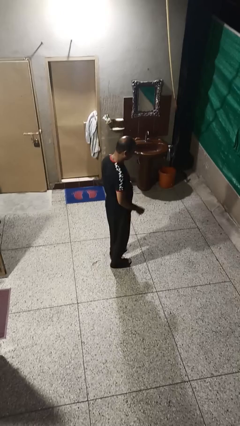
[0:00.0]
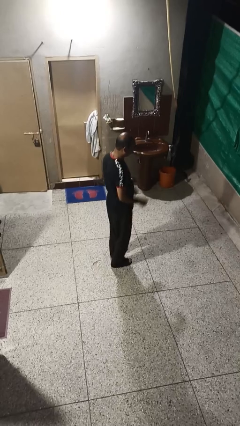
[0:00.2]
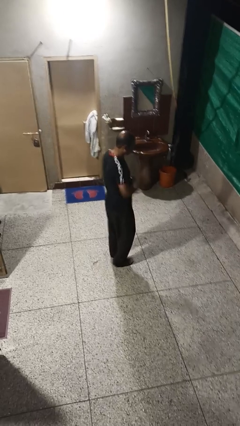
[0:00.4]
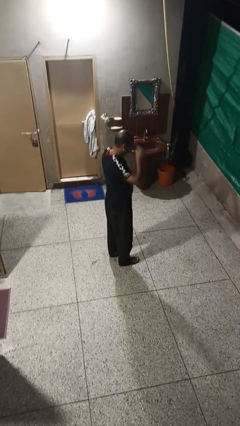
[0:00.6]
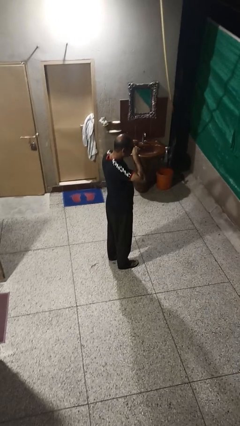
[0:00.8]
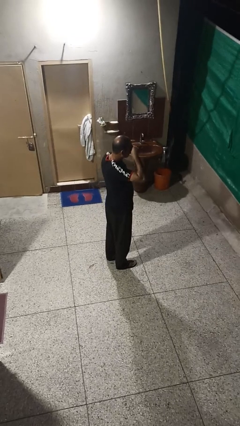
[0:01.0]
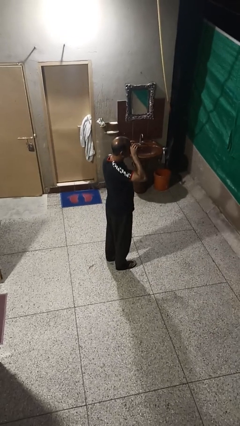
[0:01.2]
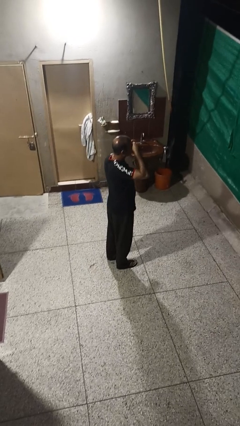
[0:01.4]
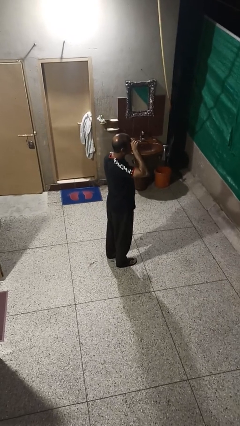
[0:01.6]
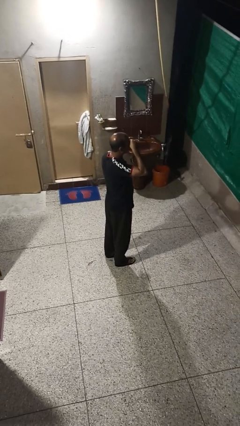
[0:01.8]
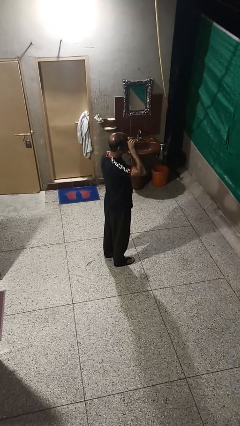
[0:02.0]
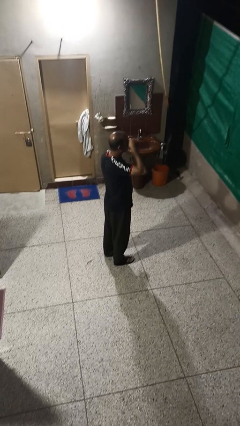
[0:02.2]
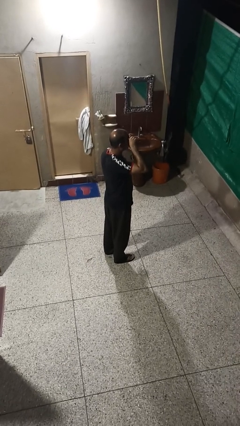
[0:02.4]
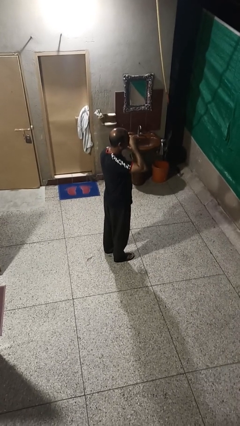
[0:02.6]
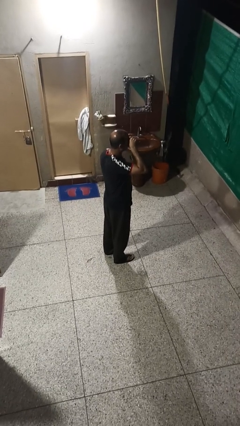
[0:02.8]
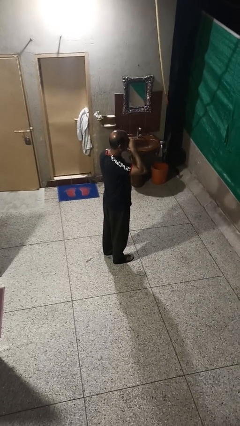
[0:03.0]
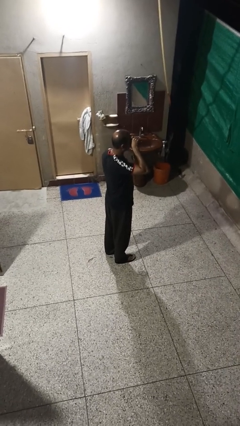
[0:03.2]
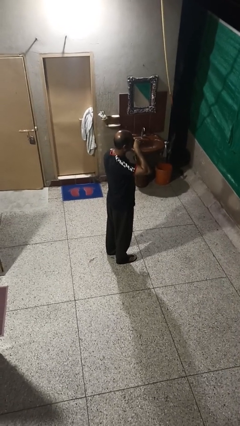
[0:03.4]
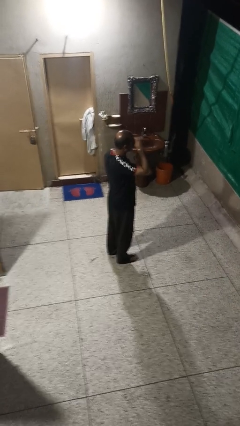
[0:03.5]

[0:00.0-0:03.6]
person rubs eyes

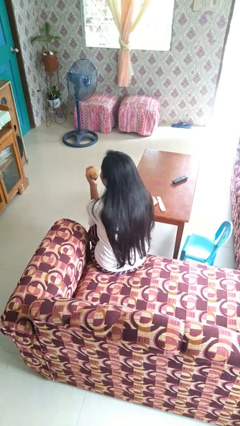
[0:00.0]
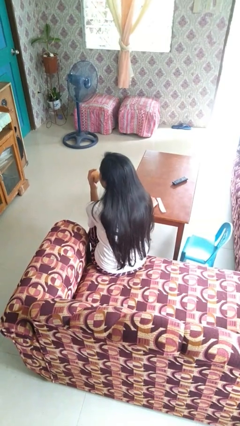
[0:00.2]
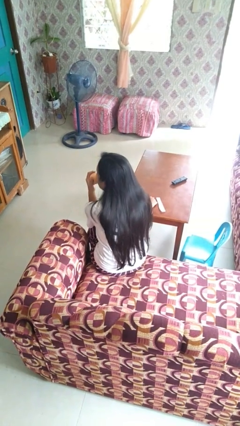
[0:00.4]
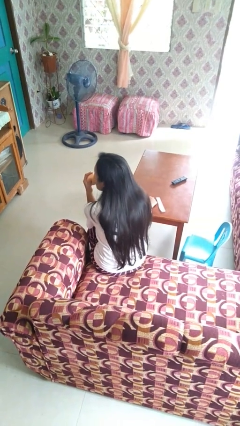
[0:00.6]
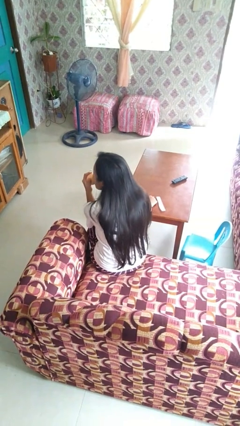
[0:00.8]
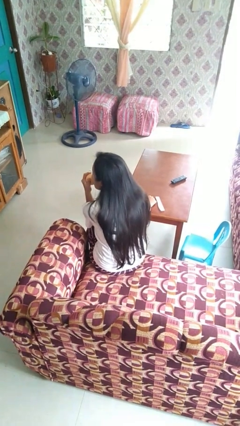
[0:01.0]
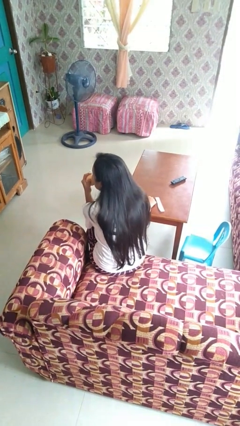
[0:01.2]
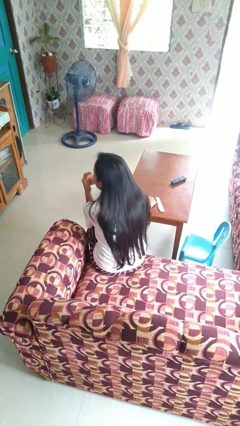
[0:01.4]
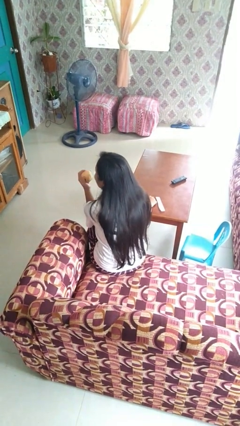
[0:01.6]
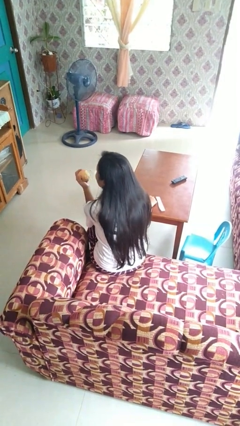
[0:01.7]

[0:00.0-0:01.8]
person eats apple

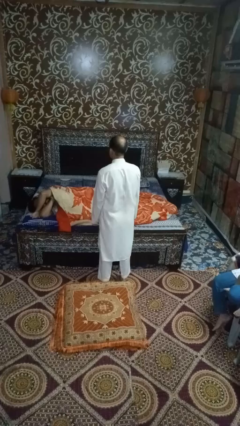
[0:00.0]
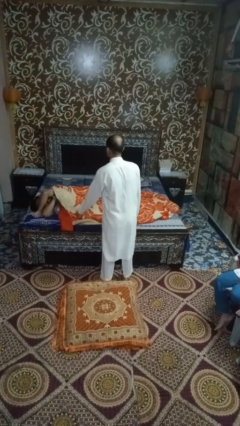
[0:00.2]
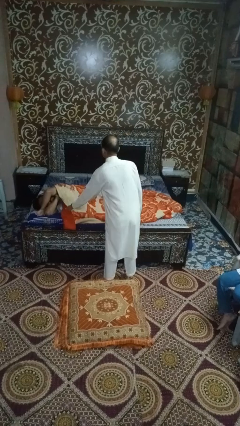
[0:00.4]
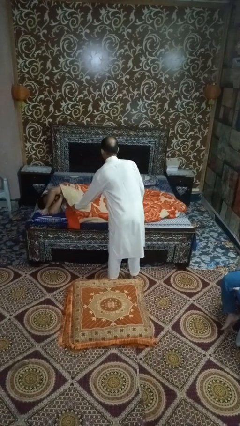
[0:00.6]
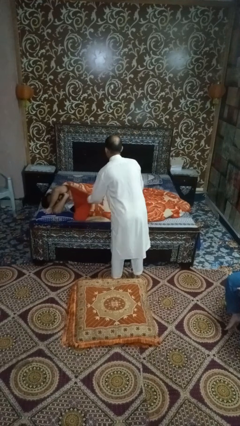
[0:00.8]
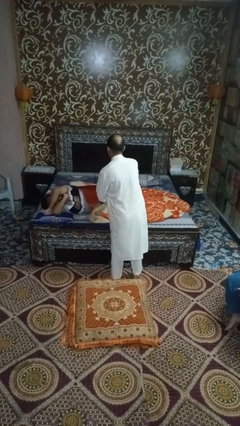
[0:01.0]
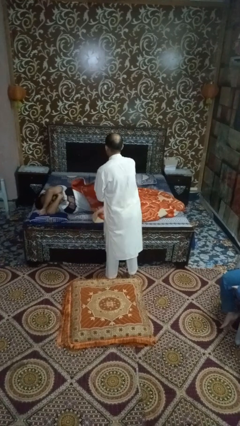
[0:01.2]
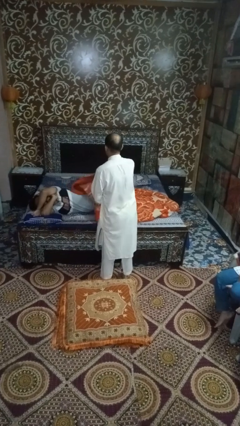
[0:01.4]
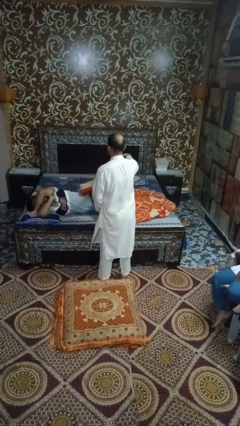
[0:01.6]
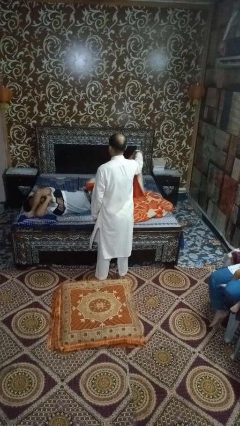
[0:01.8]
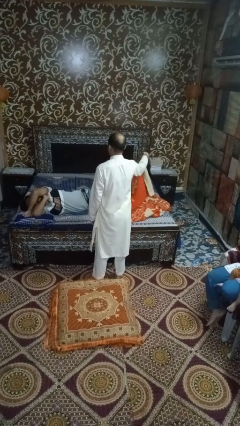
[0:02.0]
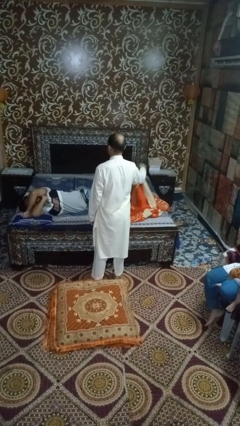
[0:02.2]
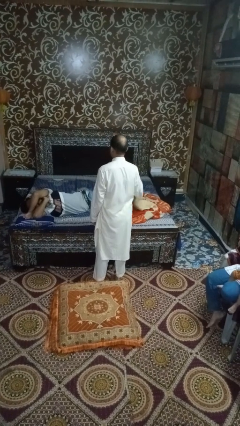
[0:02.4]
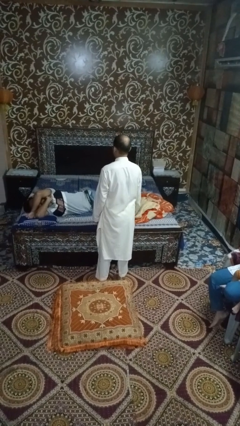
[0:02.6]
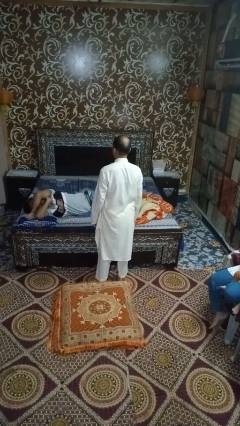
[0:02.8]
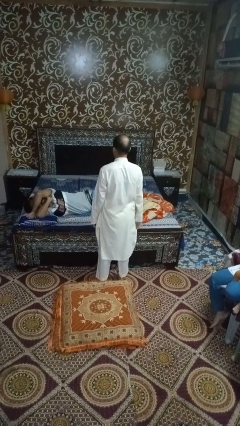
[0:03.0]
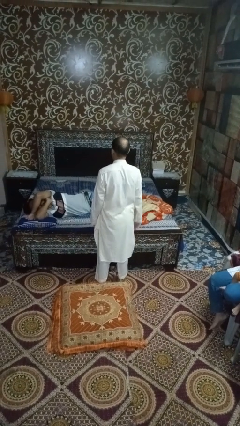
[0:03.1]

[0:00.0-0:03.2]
person uncovers friend with blanket

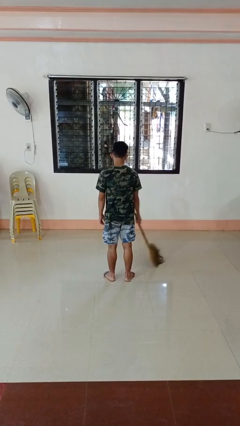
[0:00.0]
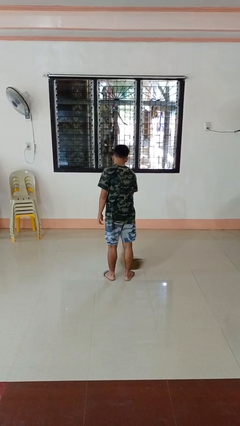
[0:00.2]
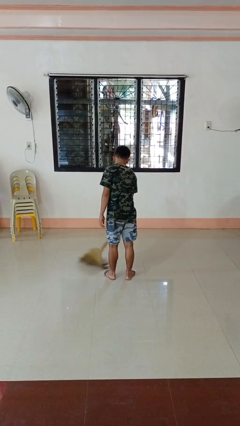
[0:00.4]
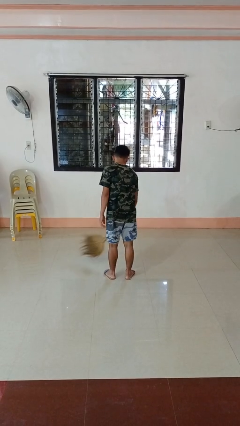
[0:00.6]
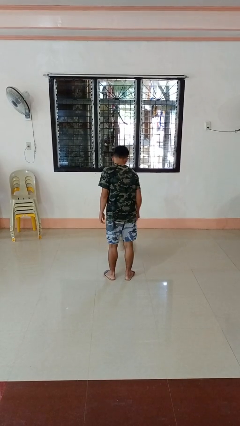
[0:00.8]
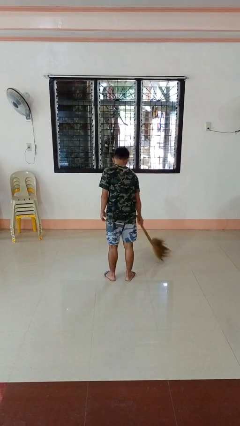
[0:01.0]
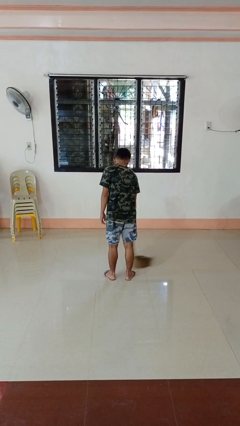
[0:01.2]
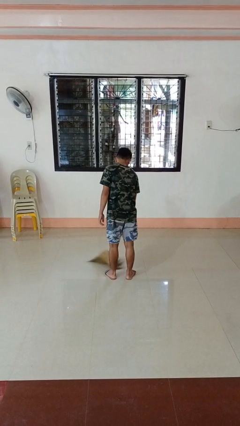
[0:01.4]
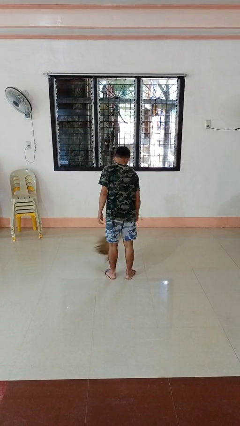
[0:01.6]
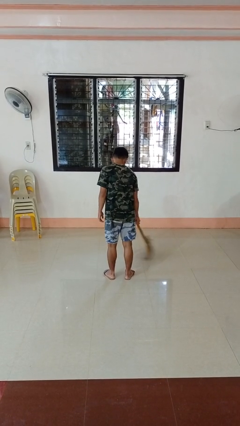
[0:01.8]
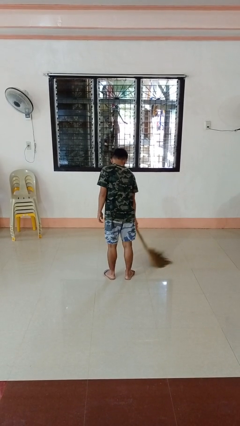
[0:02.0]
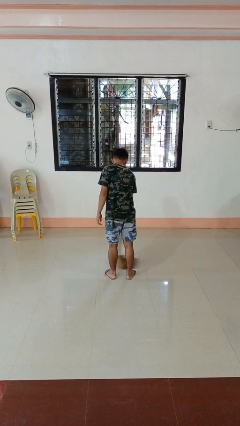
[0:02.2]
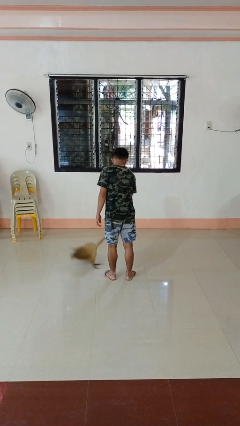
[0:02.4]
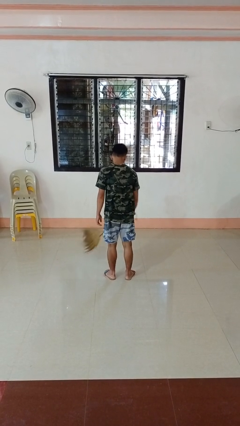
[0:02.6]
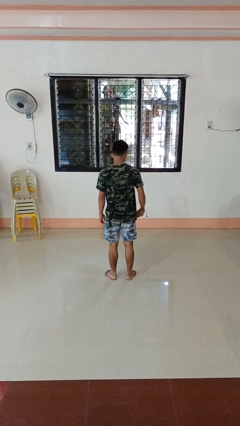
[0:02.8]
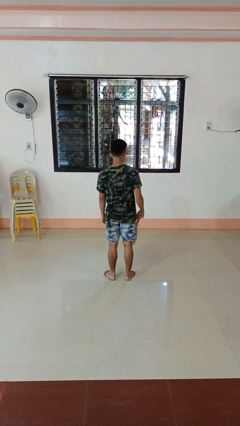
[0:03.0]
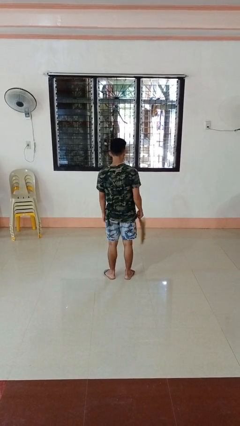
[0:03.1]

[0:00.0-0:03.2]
person sweeps floor

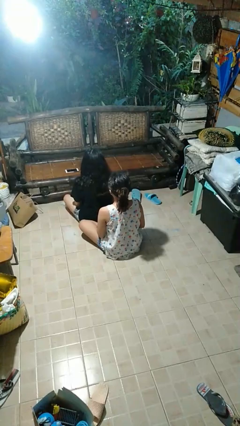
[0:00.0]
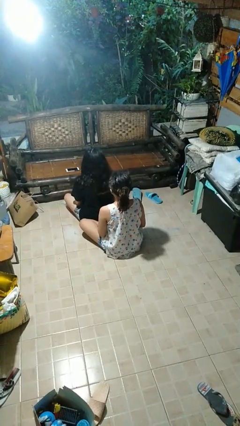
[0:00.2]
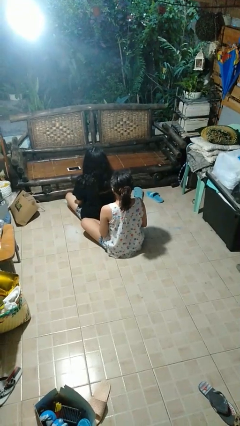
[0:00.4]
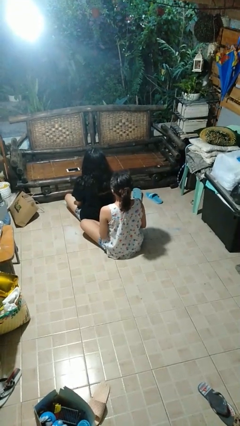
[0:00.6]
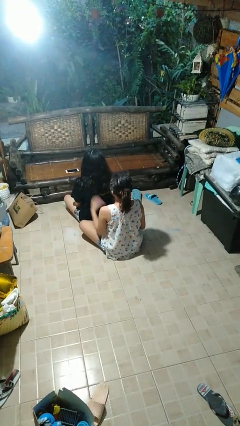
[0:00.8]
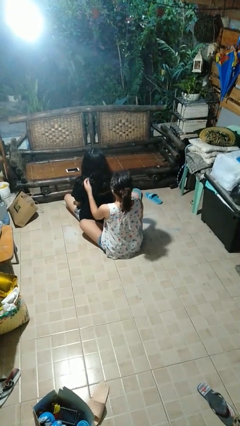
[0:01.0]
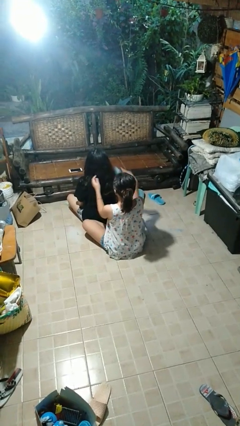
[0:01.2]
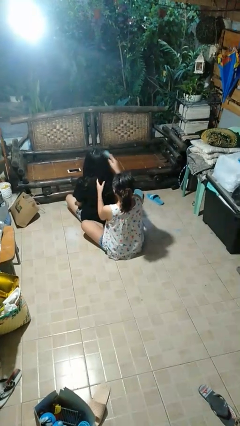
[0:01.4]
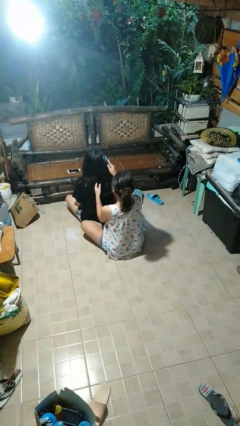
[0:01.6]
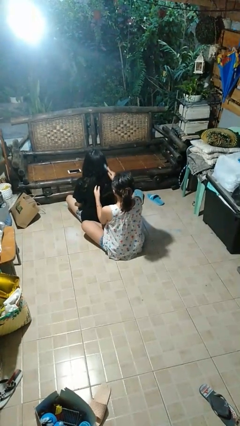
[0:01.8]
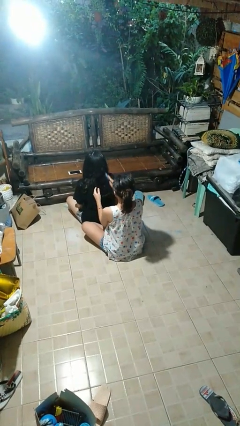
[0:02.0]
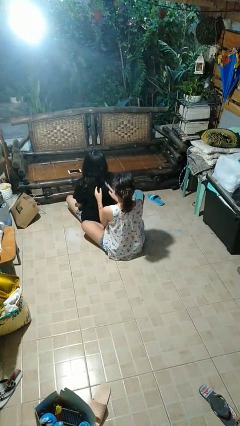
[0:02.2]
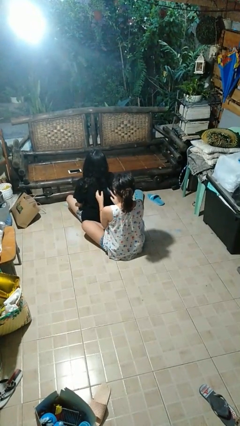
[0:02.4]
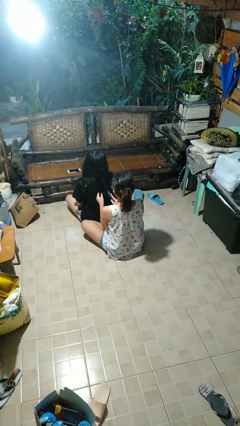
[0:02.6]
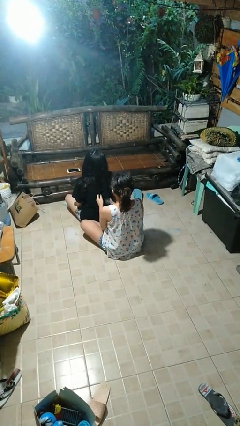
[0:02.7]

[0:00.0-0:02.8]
person brushes hair of person

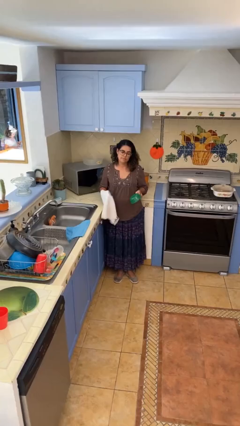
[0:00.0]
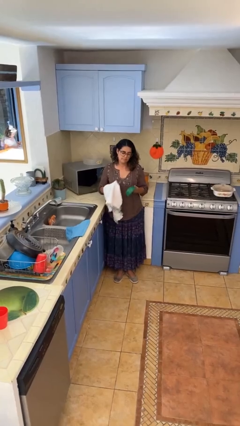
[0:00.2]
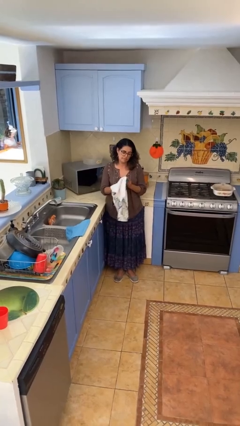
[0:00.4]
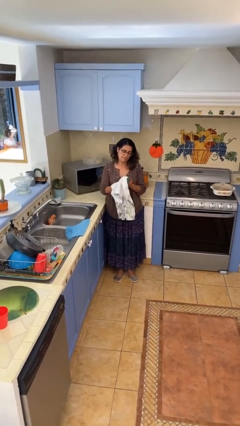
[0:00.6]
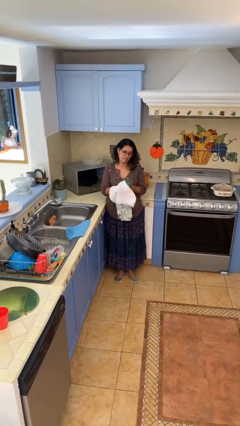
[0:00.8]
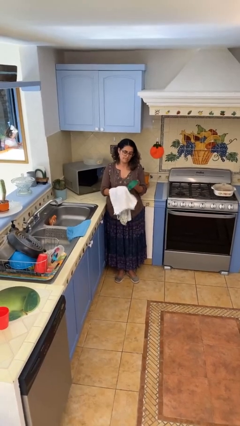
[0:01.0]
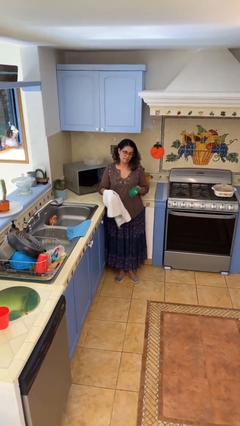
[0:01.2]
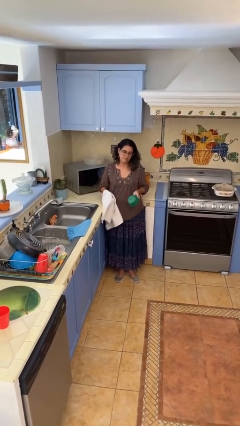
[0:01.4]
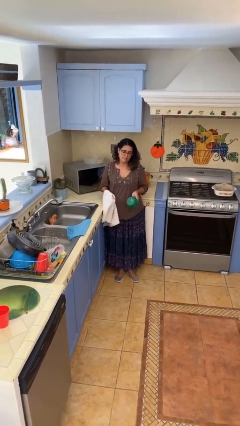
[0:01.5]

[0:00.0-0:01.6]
person dries dish

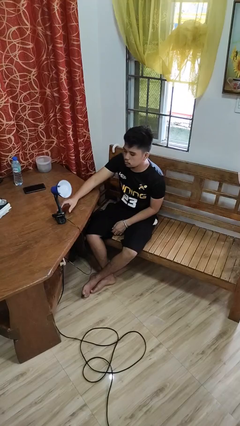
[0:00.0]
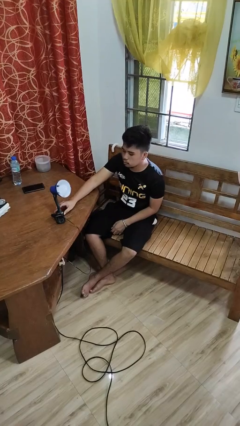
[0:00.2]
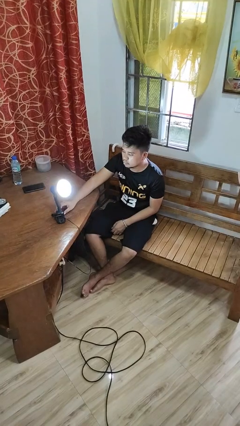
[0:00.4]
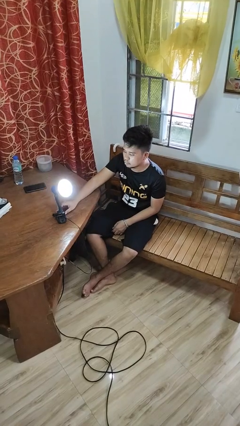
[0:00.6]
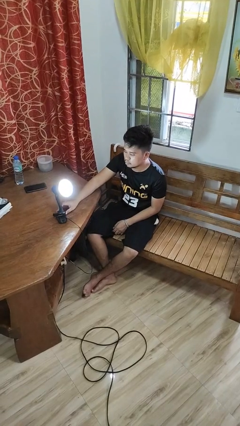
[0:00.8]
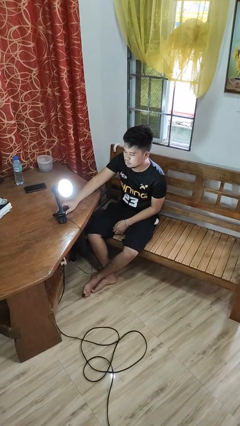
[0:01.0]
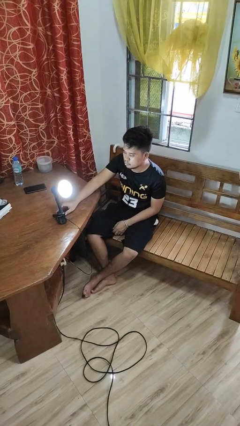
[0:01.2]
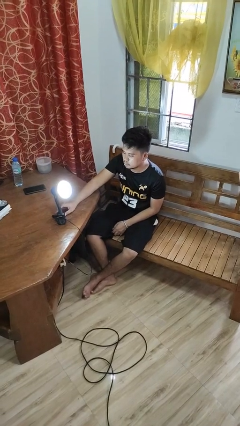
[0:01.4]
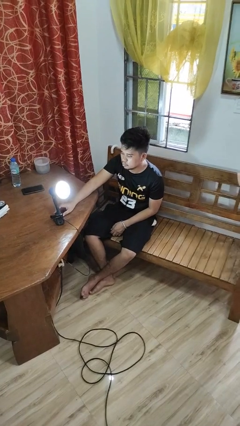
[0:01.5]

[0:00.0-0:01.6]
person turns on lamp
